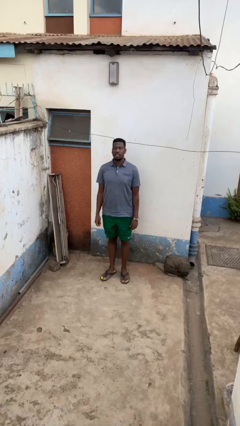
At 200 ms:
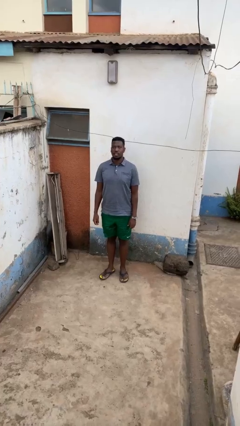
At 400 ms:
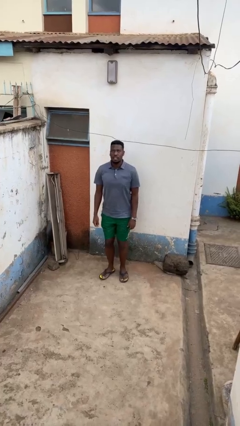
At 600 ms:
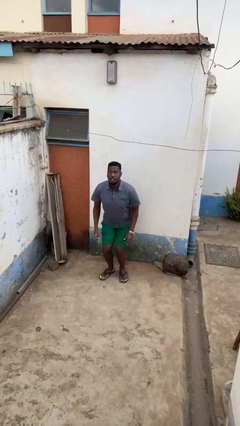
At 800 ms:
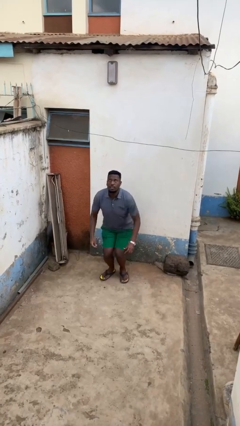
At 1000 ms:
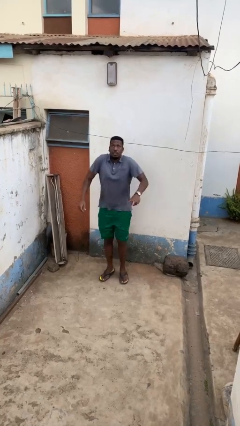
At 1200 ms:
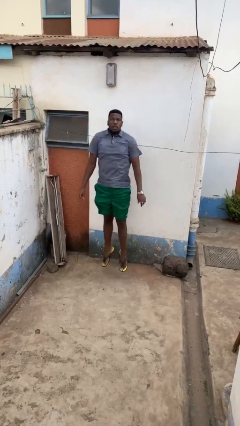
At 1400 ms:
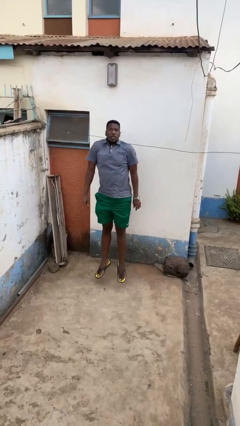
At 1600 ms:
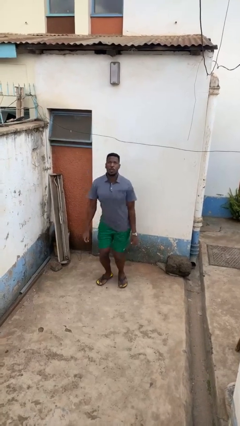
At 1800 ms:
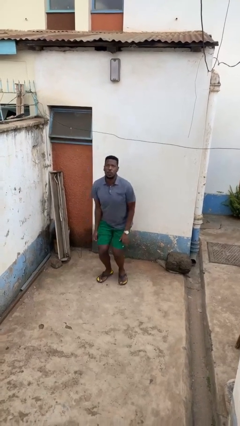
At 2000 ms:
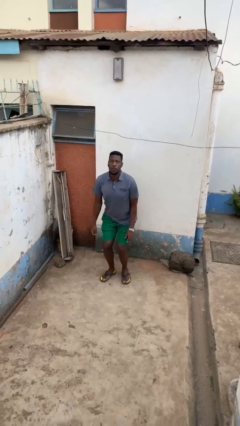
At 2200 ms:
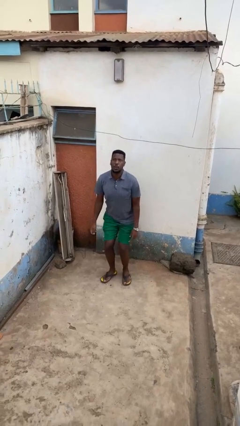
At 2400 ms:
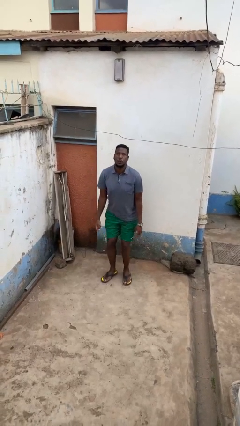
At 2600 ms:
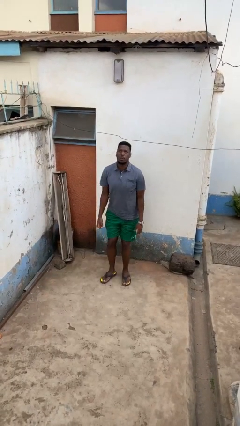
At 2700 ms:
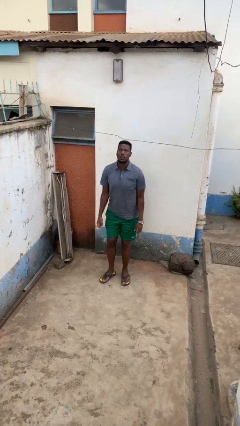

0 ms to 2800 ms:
person jumps

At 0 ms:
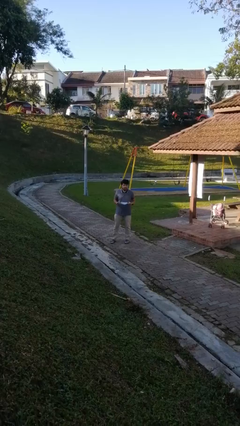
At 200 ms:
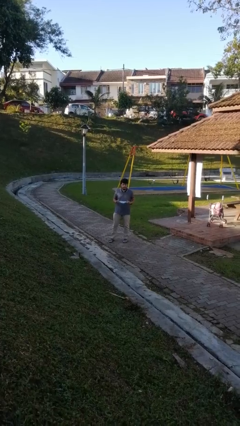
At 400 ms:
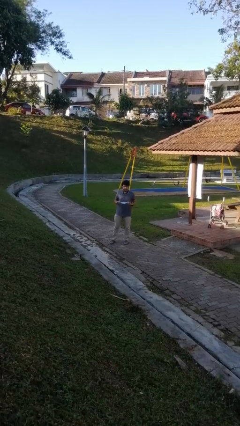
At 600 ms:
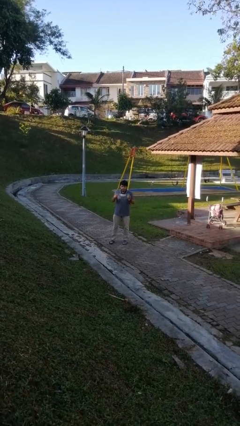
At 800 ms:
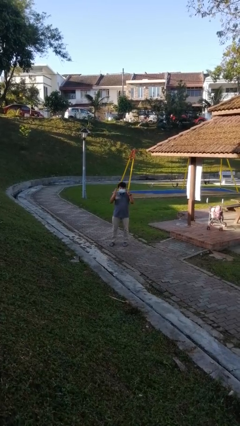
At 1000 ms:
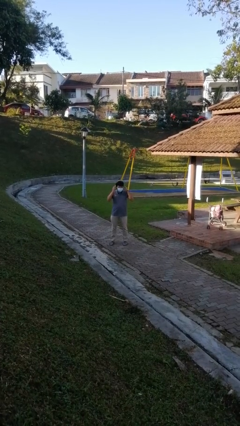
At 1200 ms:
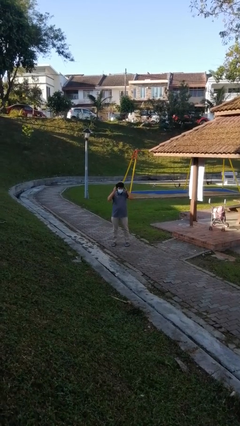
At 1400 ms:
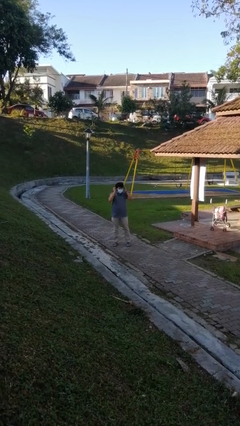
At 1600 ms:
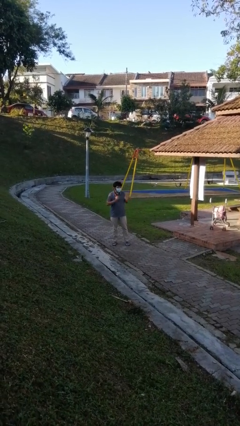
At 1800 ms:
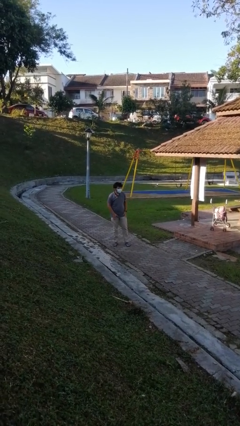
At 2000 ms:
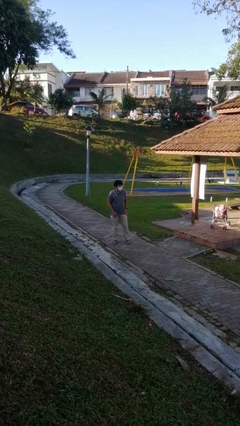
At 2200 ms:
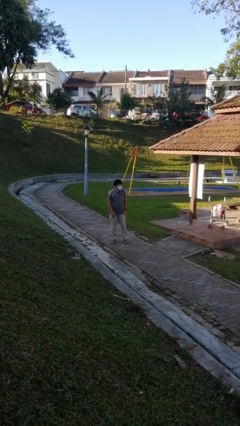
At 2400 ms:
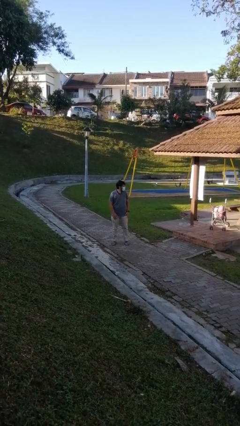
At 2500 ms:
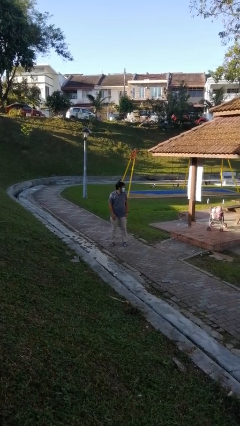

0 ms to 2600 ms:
person puts on facemask

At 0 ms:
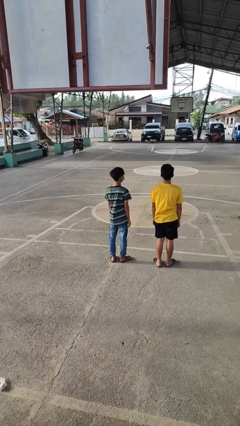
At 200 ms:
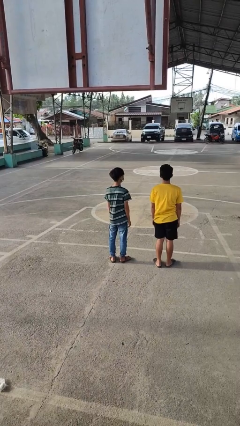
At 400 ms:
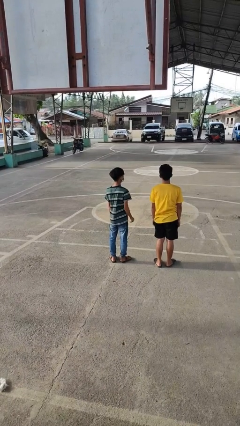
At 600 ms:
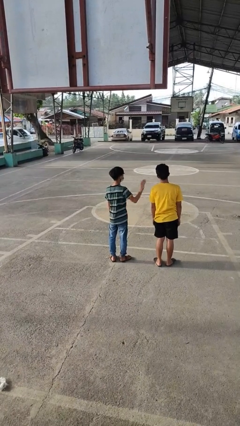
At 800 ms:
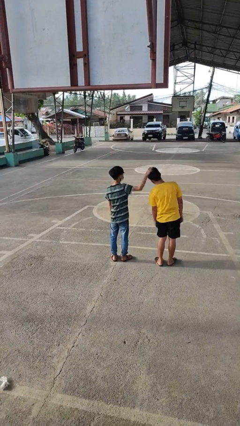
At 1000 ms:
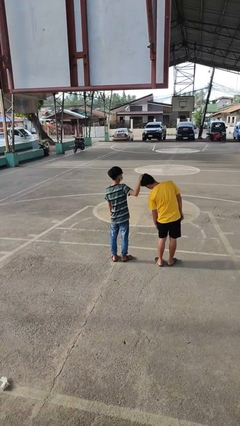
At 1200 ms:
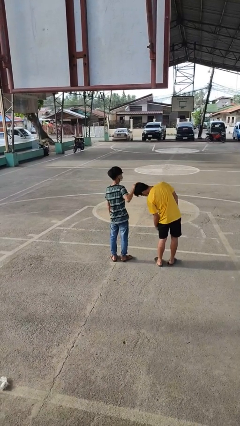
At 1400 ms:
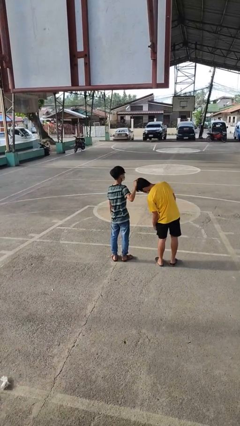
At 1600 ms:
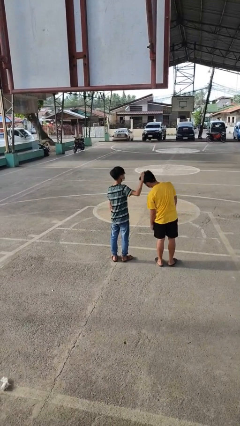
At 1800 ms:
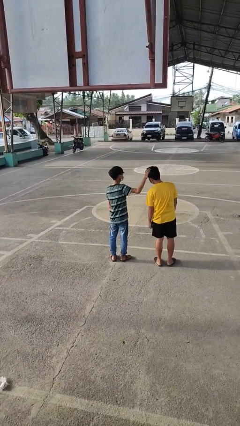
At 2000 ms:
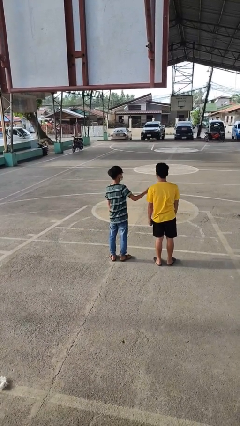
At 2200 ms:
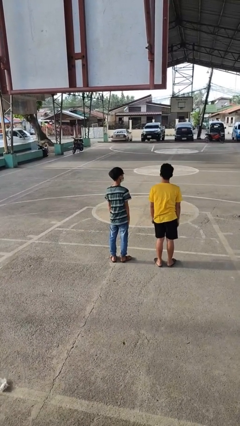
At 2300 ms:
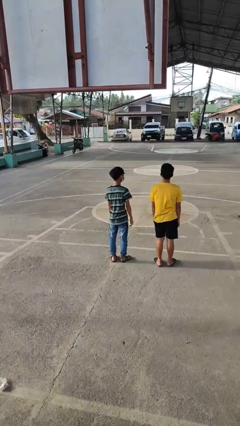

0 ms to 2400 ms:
person grabs person by hair

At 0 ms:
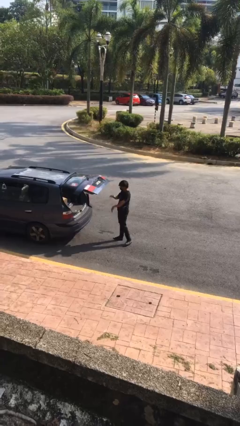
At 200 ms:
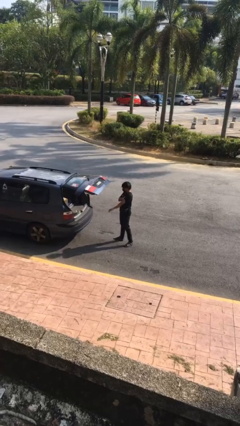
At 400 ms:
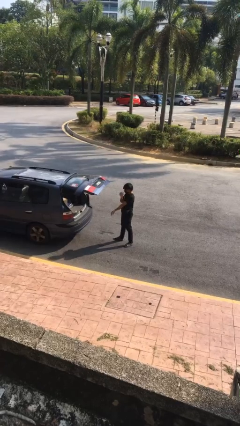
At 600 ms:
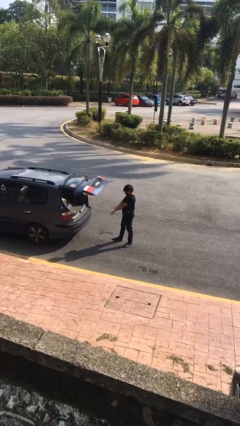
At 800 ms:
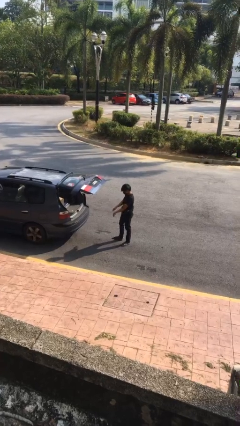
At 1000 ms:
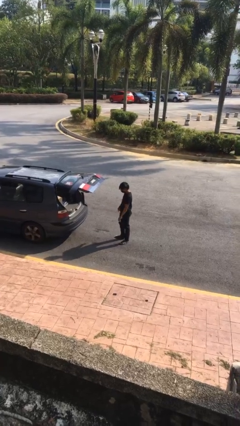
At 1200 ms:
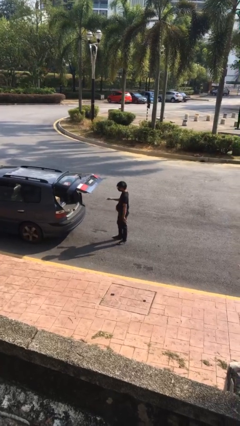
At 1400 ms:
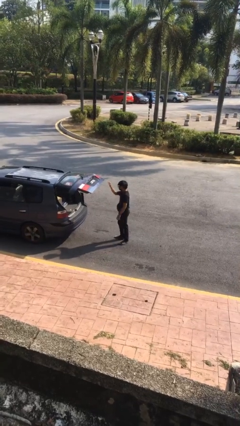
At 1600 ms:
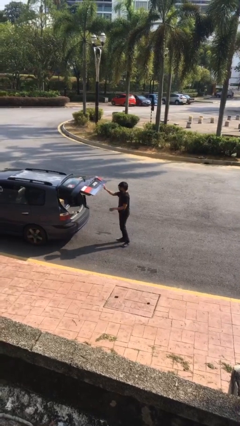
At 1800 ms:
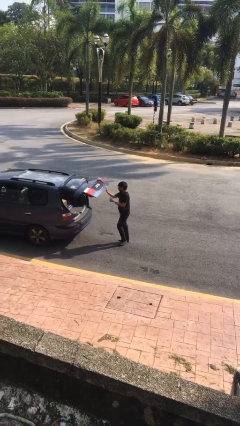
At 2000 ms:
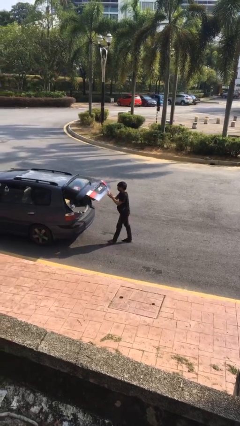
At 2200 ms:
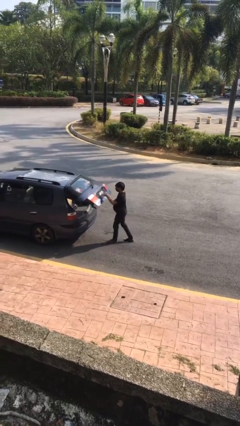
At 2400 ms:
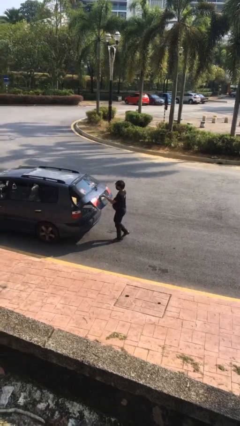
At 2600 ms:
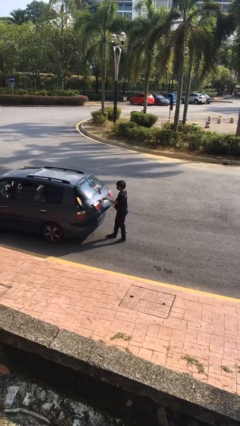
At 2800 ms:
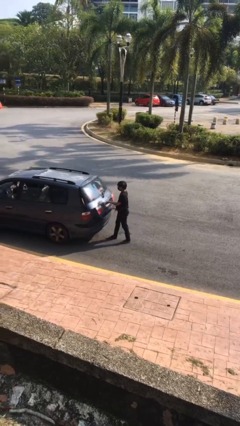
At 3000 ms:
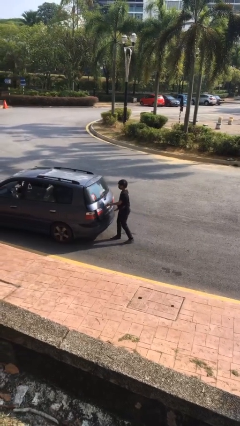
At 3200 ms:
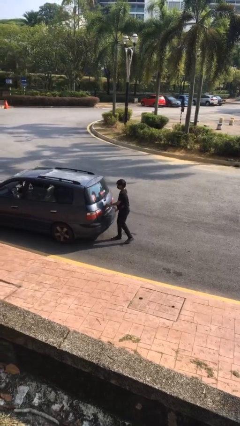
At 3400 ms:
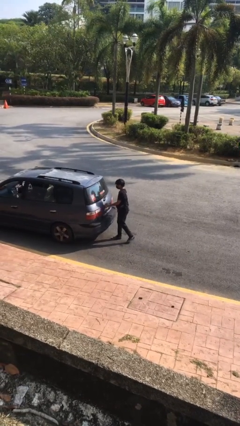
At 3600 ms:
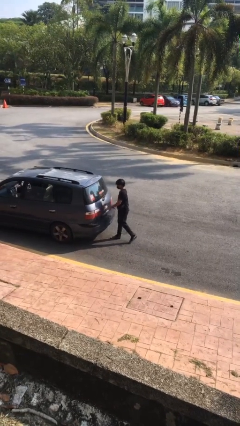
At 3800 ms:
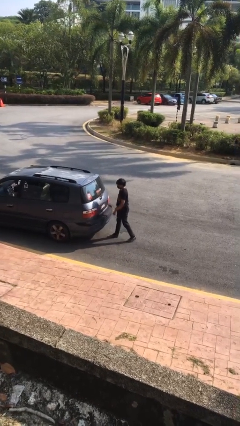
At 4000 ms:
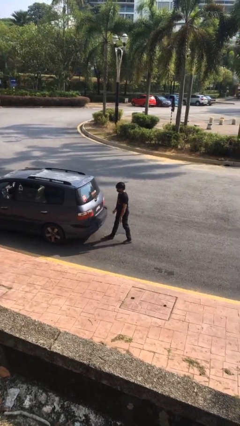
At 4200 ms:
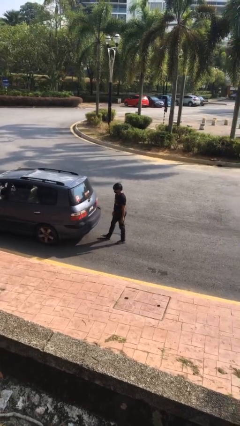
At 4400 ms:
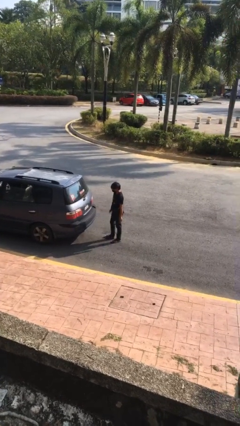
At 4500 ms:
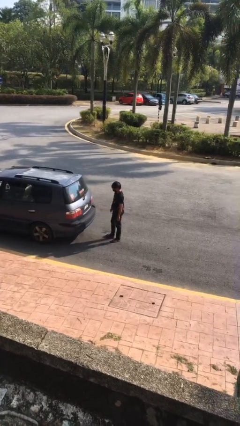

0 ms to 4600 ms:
person closes car trunk

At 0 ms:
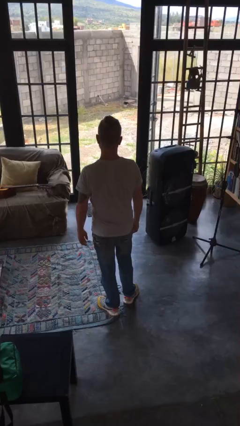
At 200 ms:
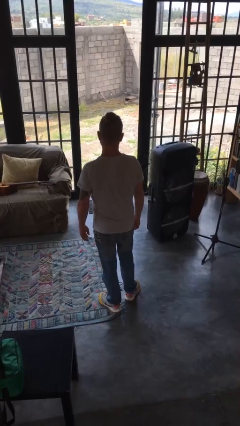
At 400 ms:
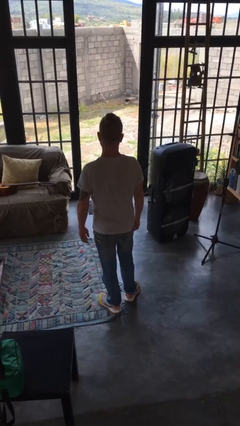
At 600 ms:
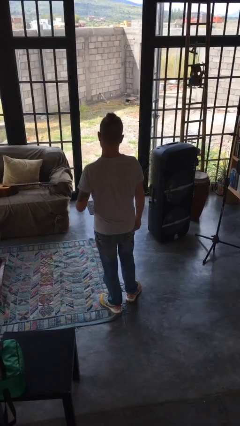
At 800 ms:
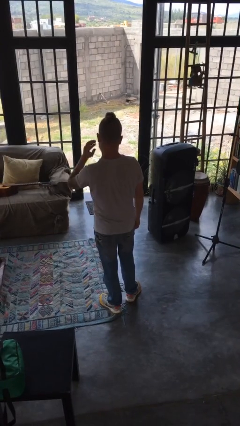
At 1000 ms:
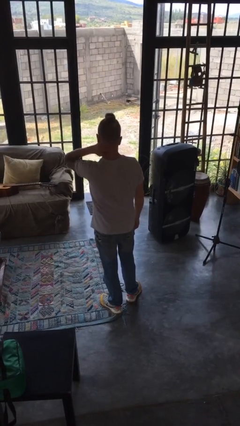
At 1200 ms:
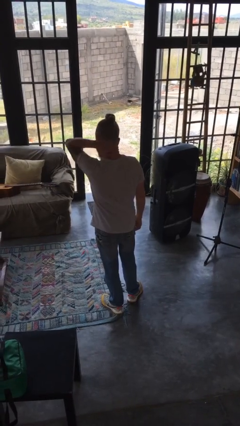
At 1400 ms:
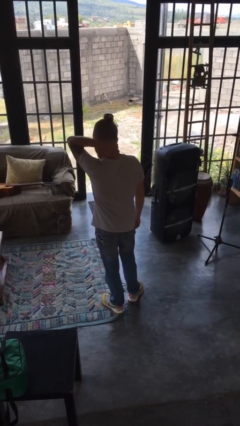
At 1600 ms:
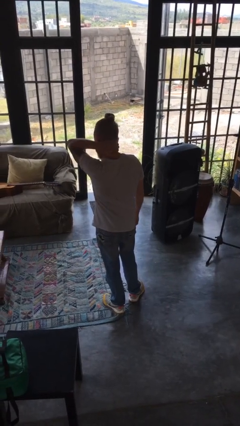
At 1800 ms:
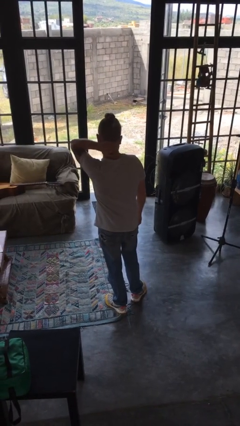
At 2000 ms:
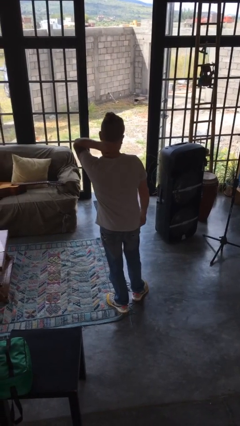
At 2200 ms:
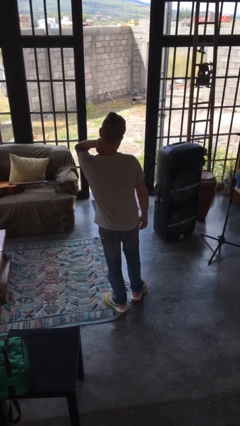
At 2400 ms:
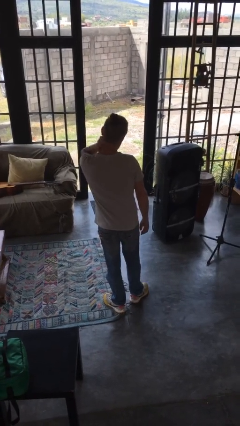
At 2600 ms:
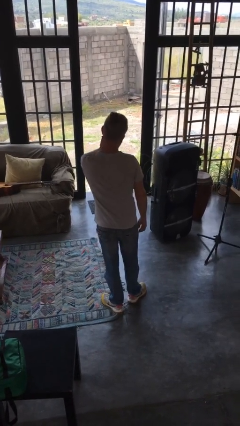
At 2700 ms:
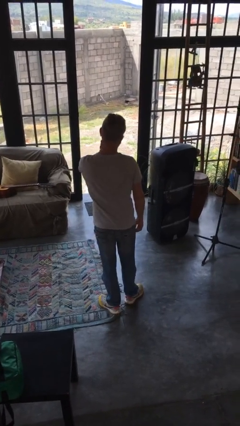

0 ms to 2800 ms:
person rubs neck

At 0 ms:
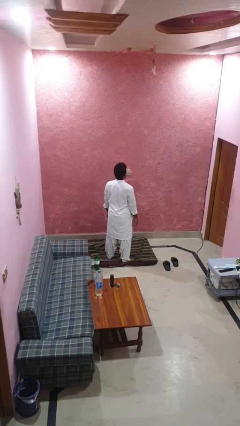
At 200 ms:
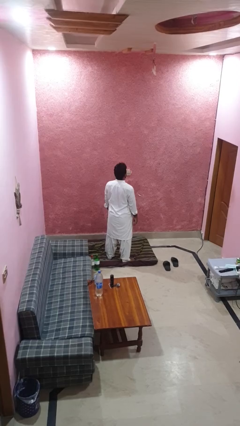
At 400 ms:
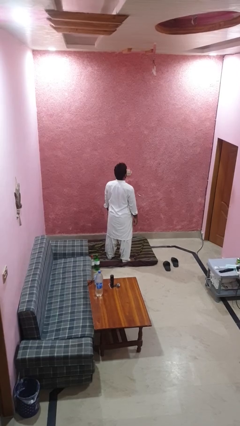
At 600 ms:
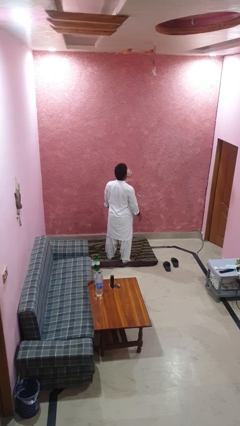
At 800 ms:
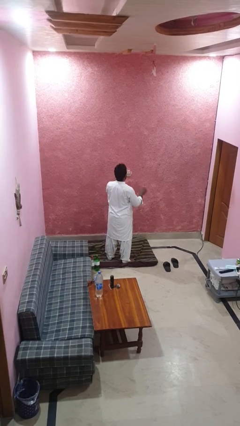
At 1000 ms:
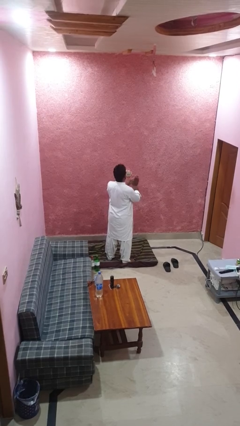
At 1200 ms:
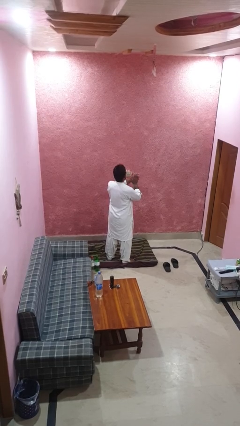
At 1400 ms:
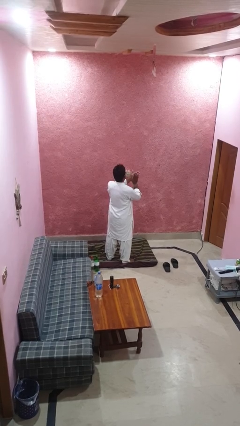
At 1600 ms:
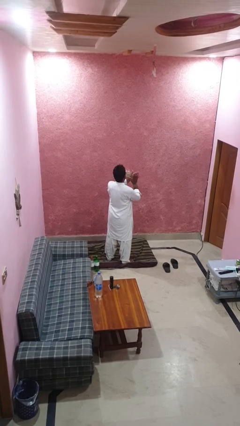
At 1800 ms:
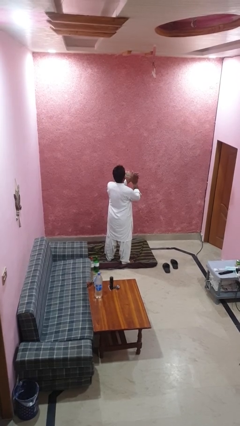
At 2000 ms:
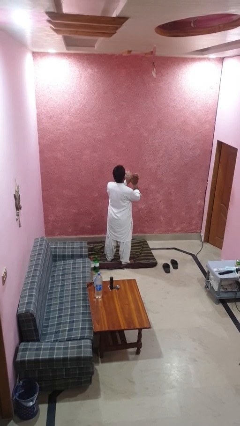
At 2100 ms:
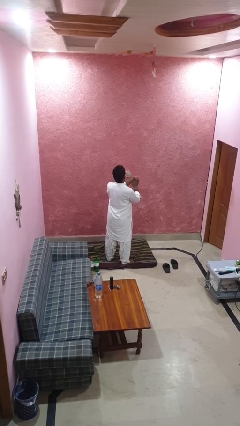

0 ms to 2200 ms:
person claps hands

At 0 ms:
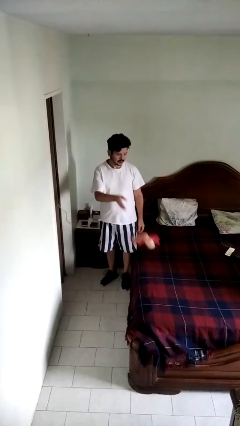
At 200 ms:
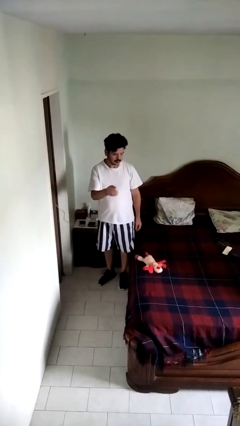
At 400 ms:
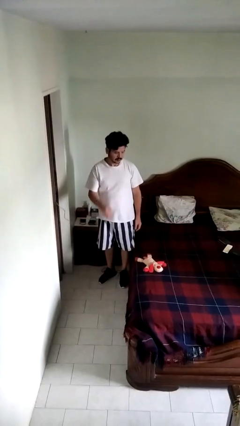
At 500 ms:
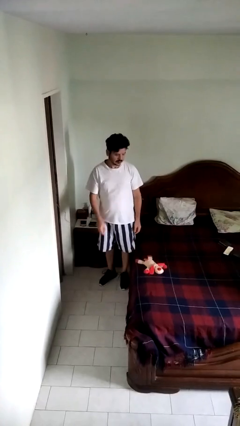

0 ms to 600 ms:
person throws object on bed
